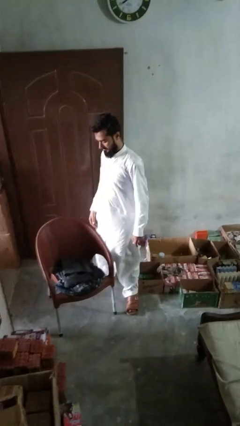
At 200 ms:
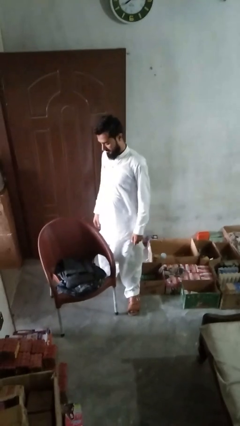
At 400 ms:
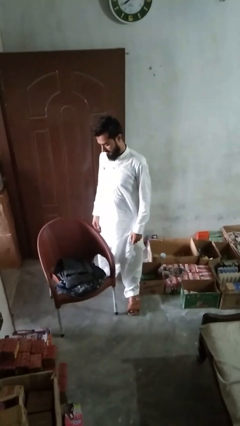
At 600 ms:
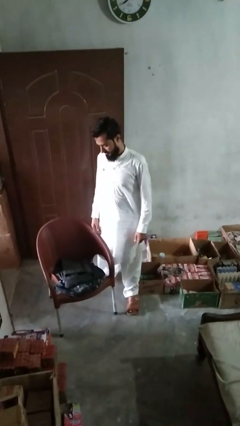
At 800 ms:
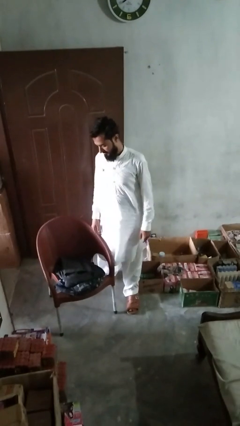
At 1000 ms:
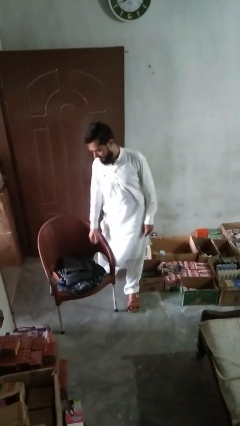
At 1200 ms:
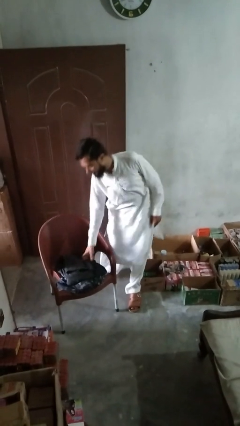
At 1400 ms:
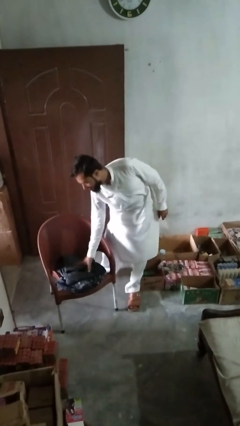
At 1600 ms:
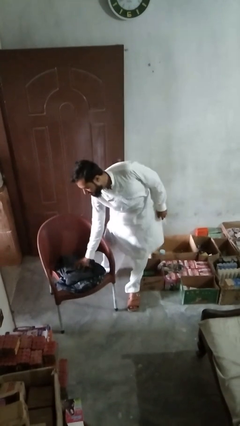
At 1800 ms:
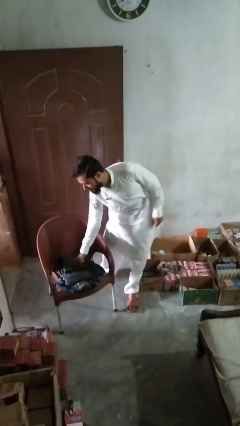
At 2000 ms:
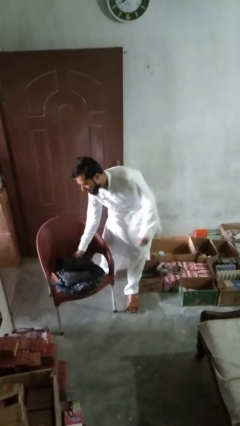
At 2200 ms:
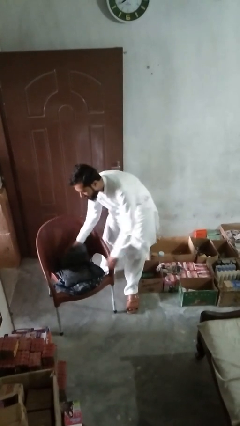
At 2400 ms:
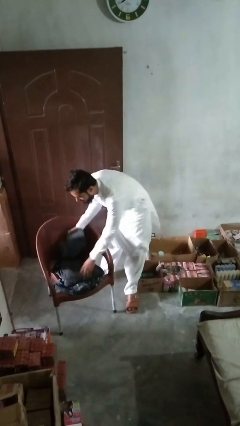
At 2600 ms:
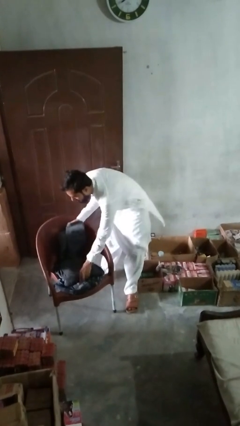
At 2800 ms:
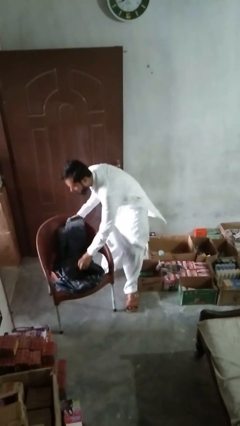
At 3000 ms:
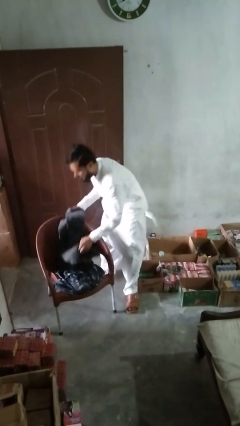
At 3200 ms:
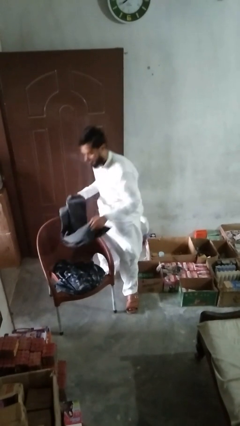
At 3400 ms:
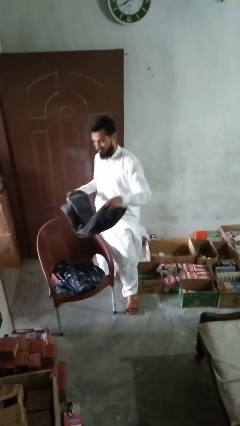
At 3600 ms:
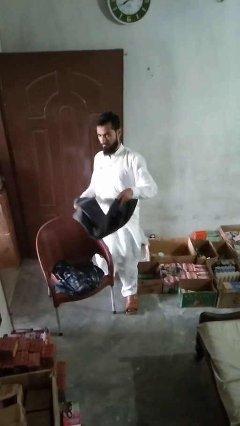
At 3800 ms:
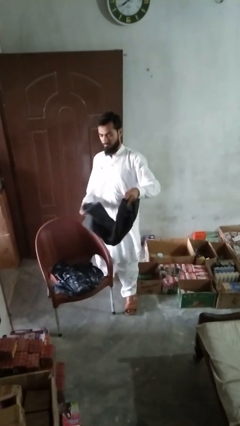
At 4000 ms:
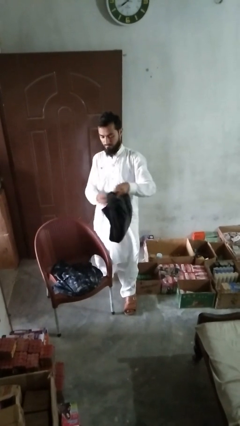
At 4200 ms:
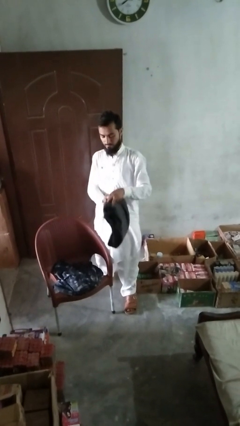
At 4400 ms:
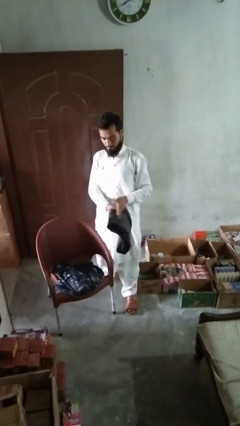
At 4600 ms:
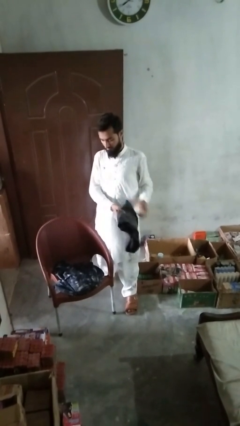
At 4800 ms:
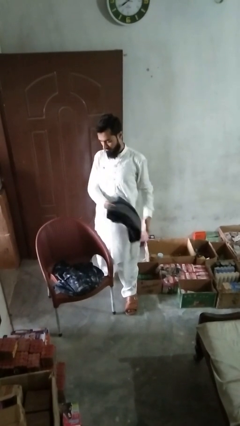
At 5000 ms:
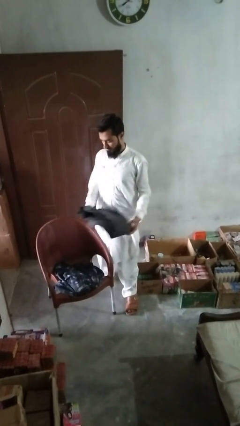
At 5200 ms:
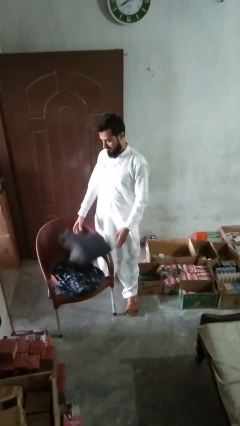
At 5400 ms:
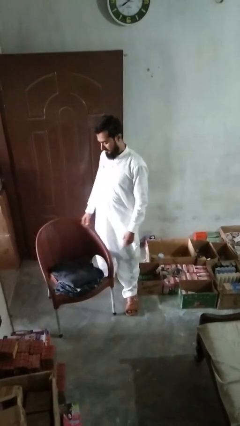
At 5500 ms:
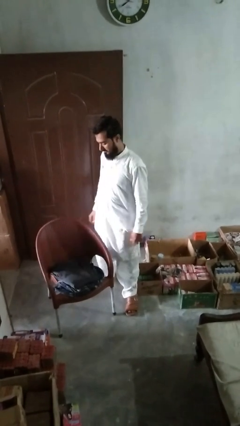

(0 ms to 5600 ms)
person folds pants

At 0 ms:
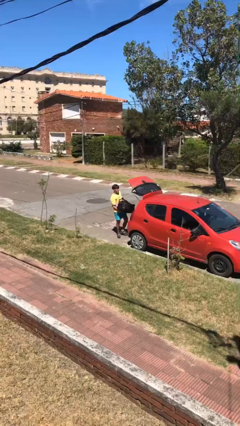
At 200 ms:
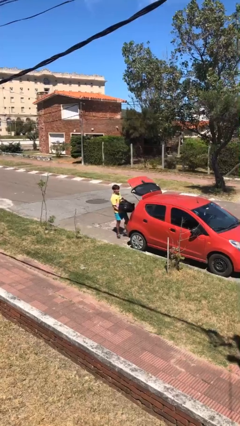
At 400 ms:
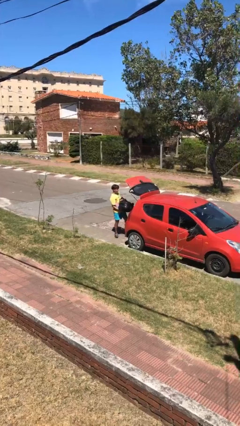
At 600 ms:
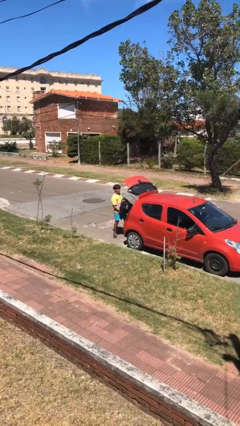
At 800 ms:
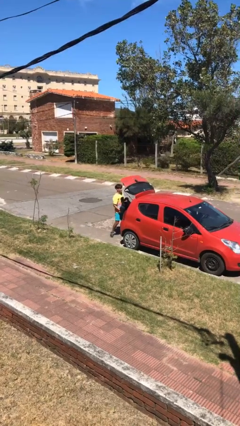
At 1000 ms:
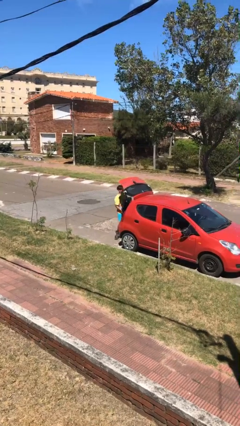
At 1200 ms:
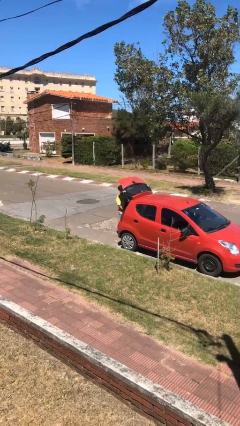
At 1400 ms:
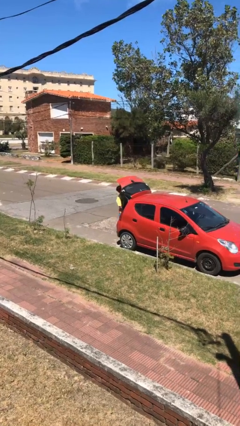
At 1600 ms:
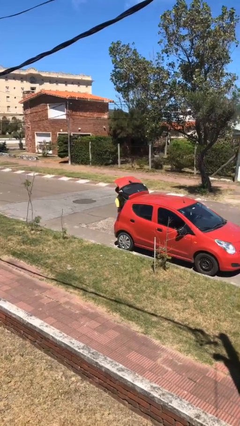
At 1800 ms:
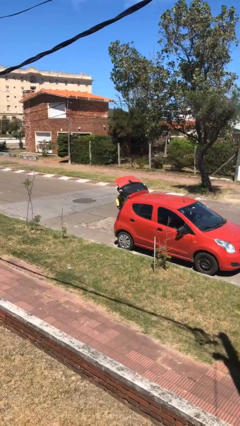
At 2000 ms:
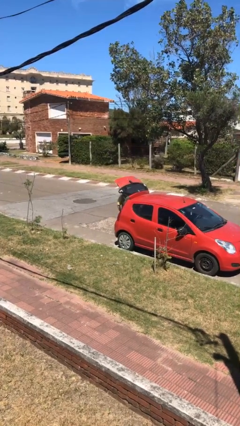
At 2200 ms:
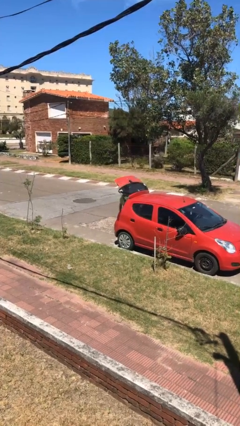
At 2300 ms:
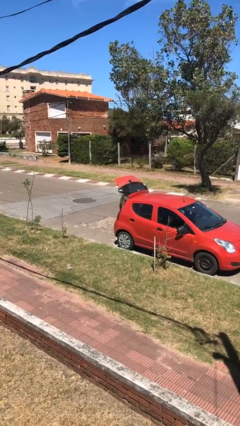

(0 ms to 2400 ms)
person loads car

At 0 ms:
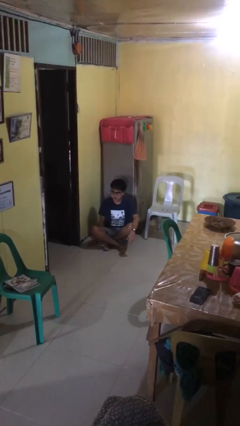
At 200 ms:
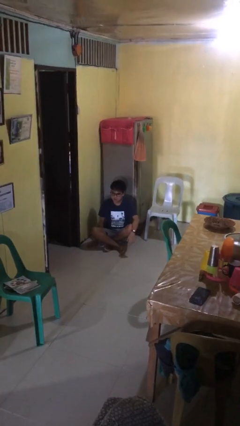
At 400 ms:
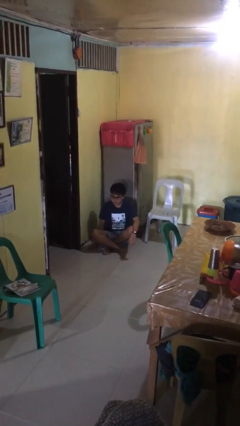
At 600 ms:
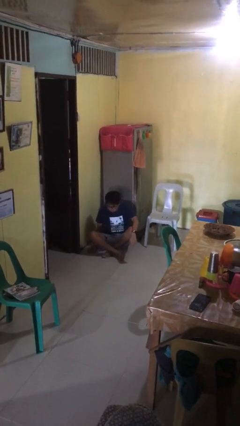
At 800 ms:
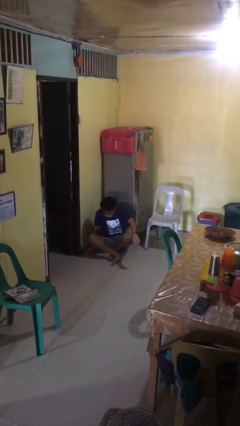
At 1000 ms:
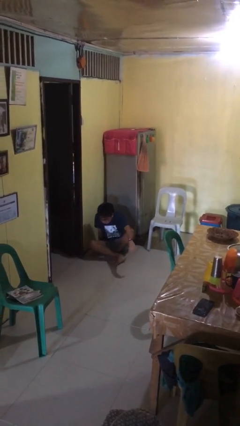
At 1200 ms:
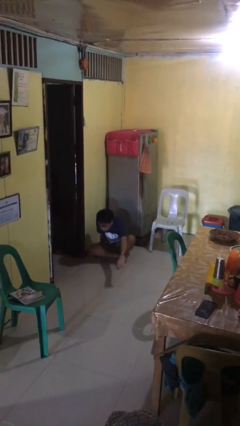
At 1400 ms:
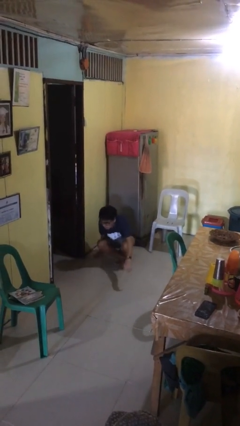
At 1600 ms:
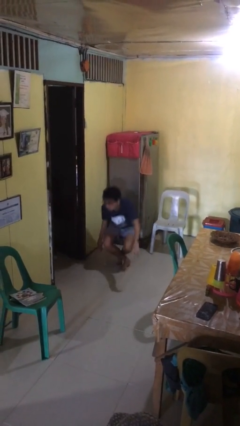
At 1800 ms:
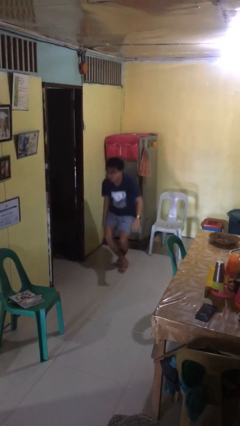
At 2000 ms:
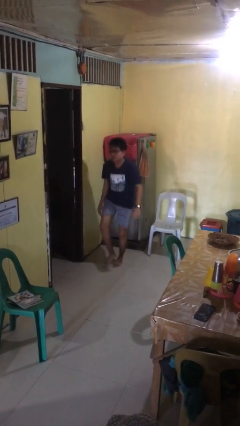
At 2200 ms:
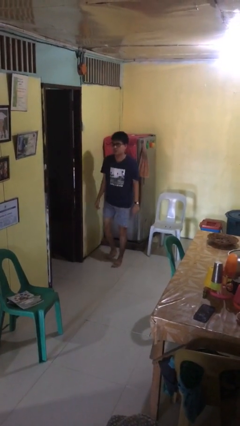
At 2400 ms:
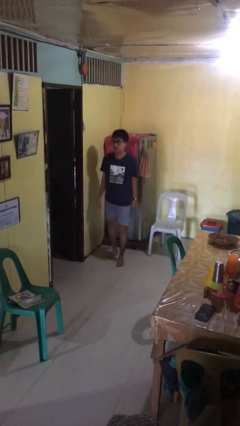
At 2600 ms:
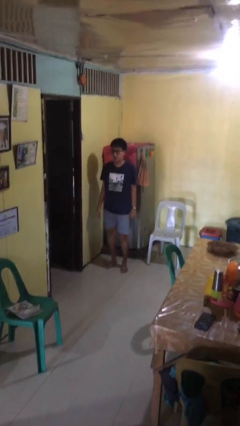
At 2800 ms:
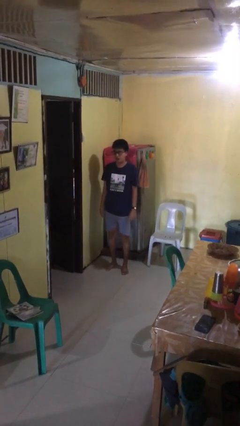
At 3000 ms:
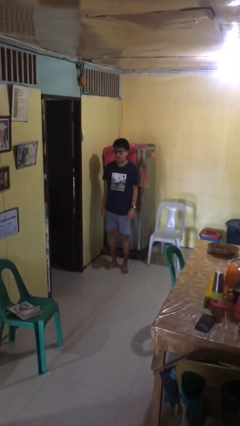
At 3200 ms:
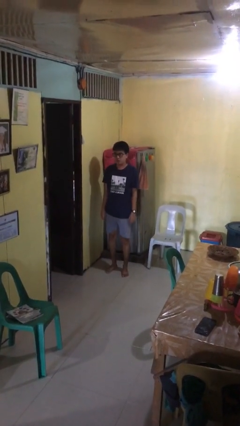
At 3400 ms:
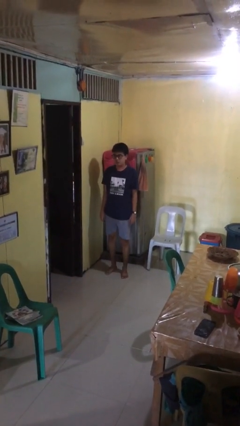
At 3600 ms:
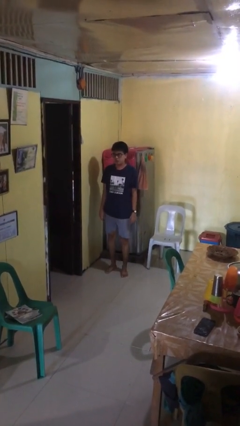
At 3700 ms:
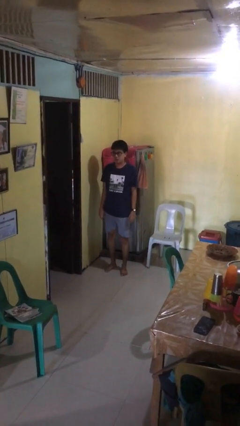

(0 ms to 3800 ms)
person stands up from floor

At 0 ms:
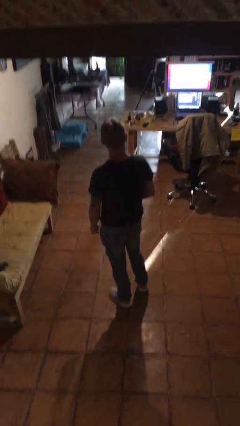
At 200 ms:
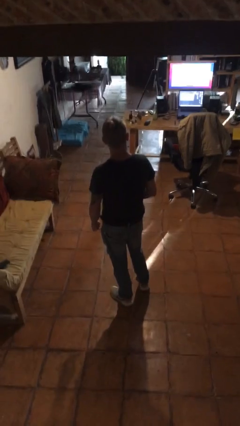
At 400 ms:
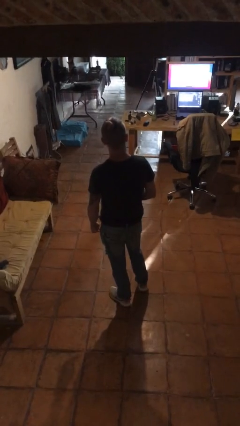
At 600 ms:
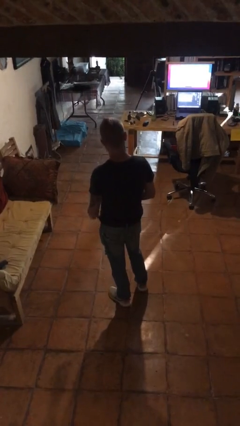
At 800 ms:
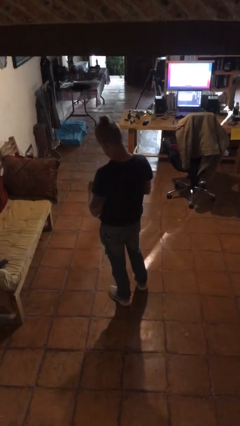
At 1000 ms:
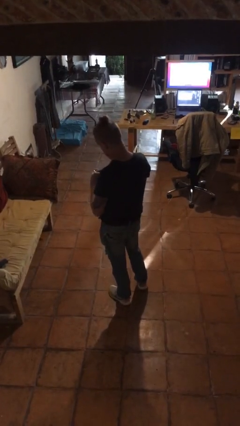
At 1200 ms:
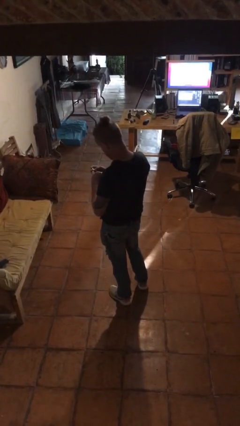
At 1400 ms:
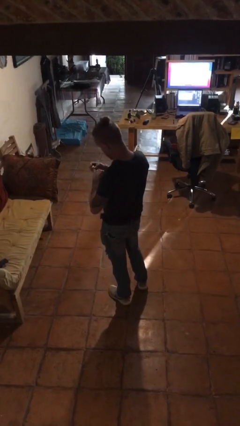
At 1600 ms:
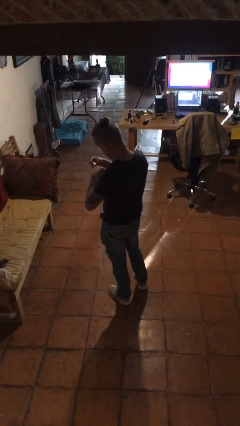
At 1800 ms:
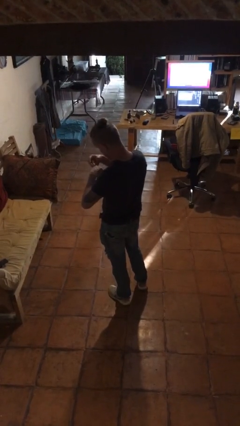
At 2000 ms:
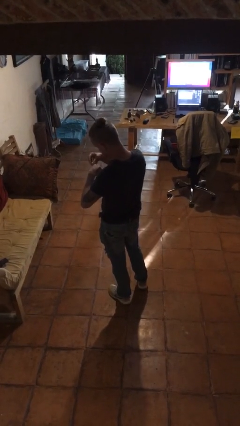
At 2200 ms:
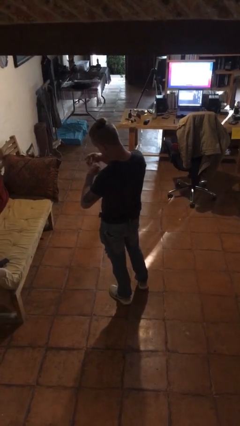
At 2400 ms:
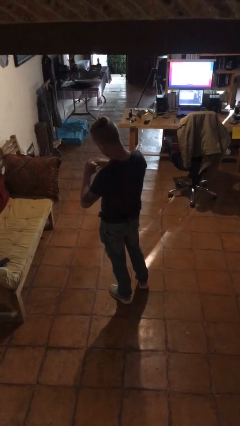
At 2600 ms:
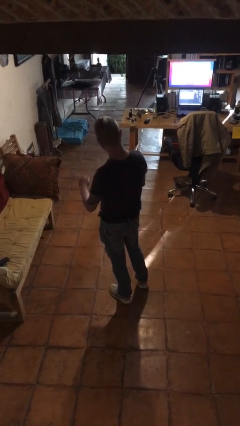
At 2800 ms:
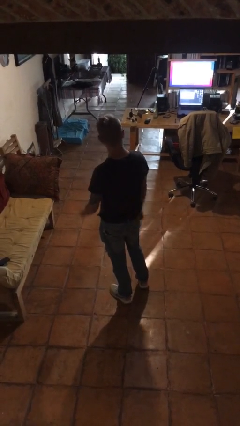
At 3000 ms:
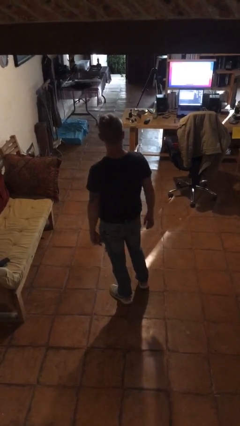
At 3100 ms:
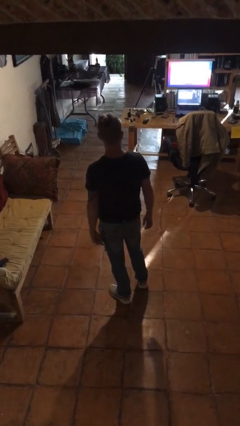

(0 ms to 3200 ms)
person puts on ring

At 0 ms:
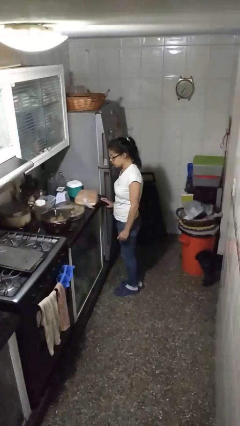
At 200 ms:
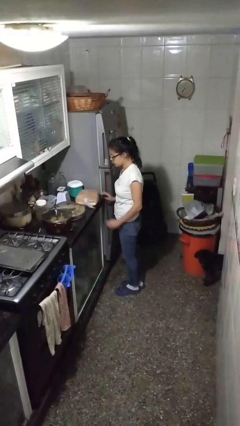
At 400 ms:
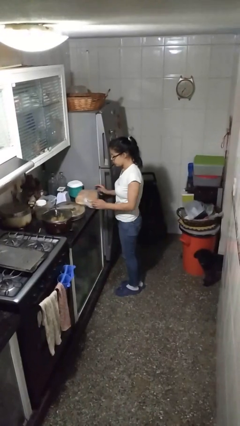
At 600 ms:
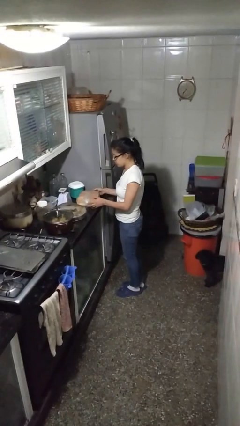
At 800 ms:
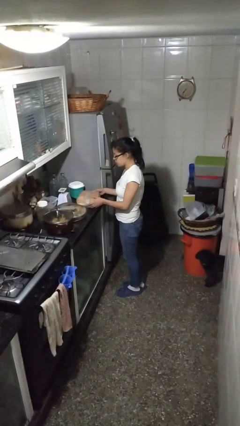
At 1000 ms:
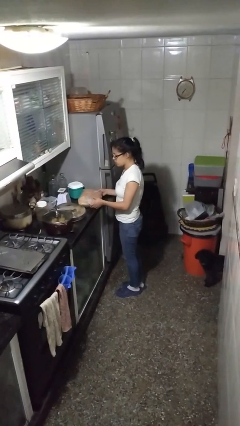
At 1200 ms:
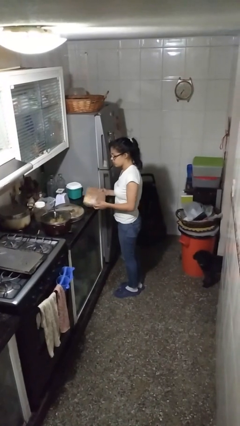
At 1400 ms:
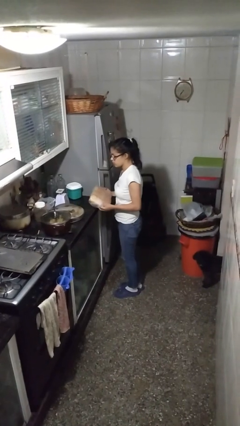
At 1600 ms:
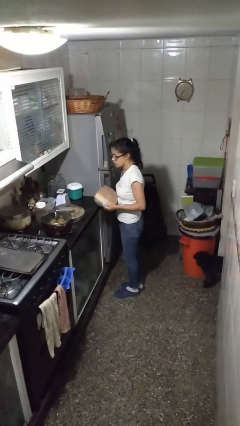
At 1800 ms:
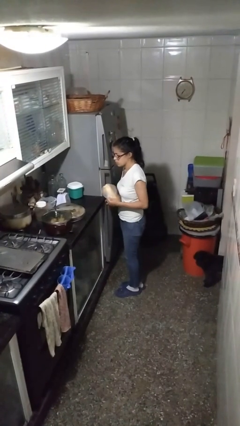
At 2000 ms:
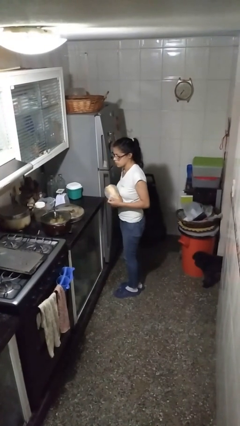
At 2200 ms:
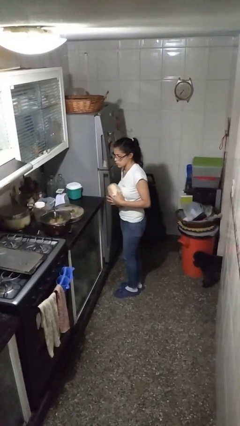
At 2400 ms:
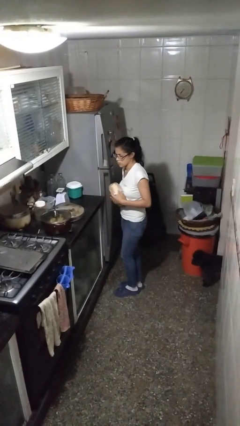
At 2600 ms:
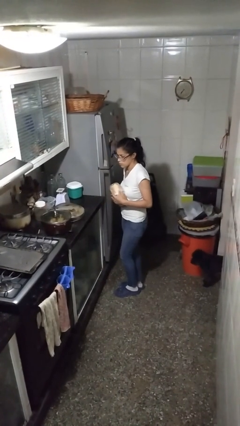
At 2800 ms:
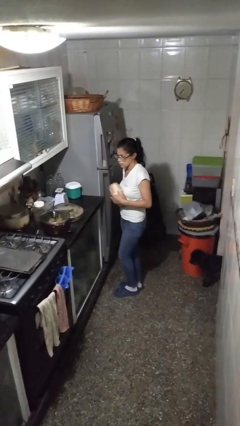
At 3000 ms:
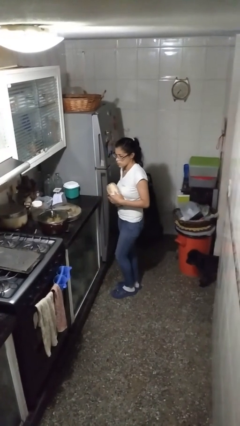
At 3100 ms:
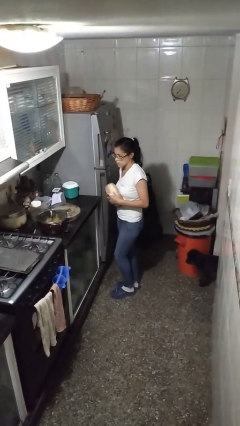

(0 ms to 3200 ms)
person picks up object from countertop
